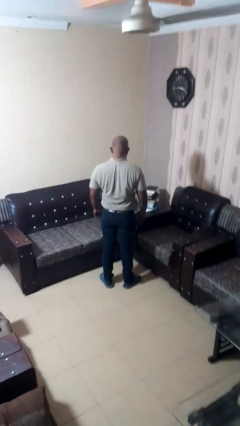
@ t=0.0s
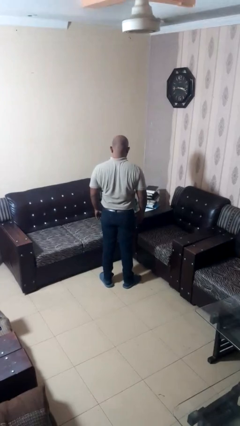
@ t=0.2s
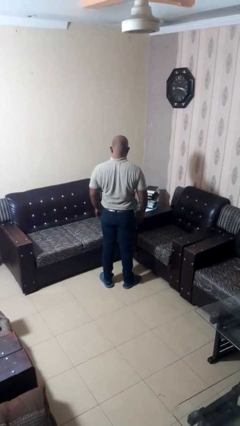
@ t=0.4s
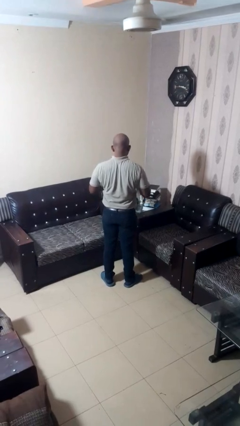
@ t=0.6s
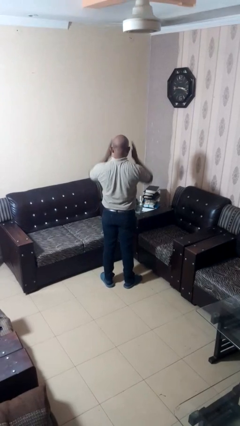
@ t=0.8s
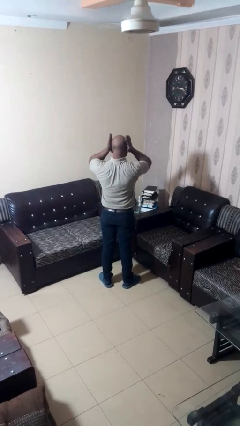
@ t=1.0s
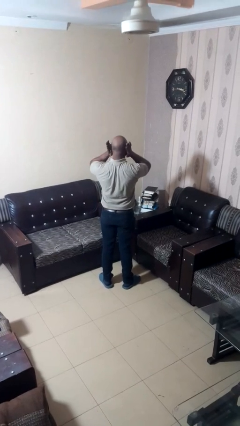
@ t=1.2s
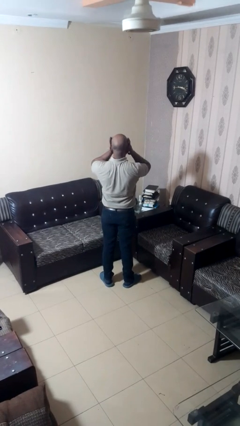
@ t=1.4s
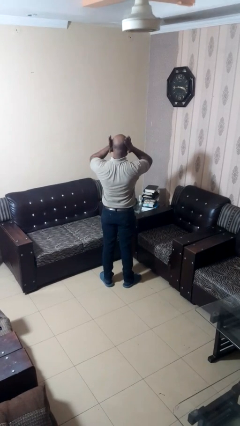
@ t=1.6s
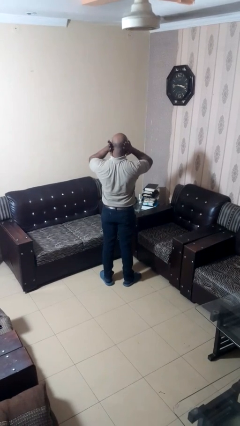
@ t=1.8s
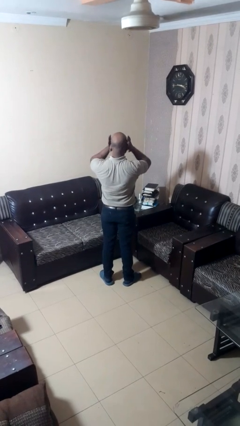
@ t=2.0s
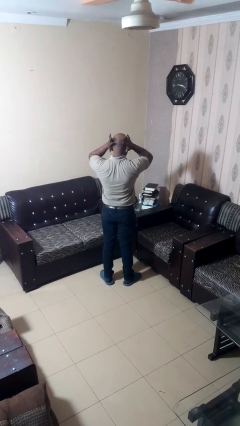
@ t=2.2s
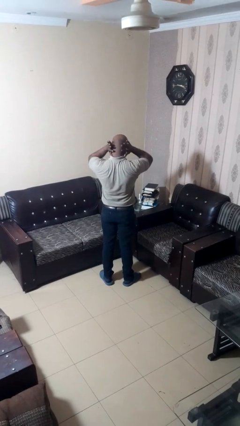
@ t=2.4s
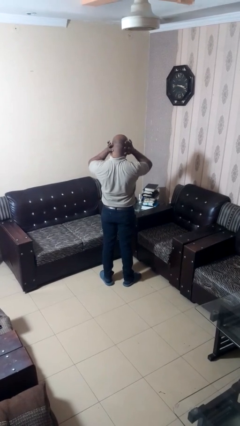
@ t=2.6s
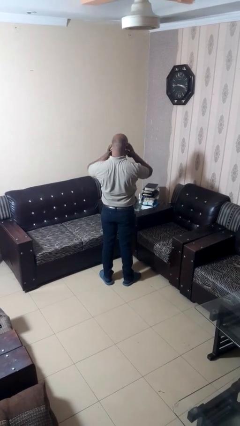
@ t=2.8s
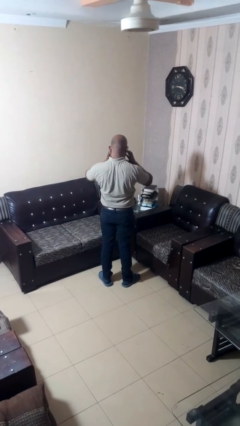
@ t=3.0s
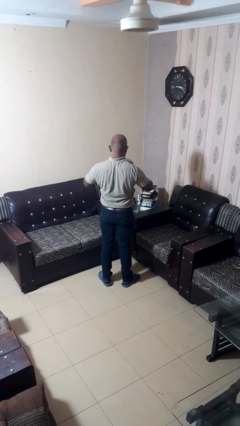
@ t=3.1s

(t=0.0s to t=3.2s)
person touches earlobe

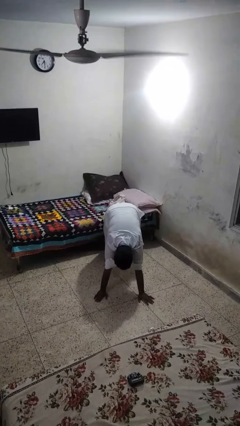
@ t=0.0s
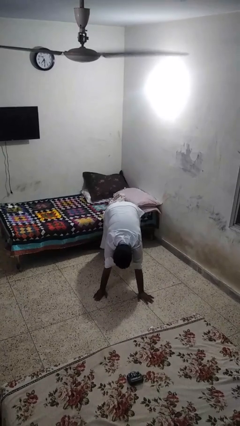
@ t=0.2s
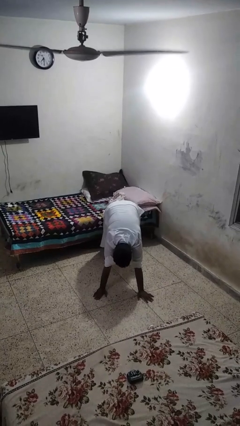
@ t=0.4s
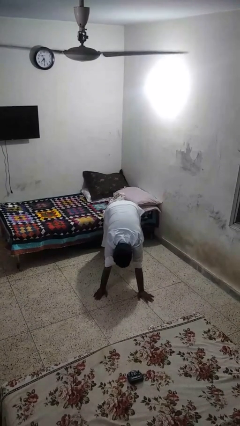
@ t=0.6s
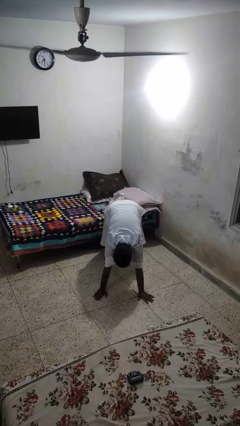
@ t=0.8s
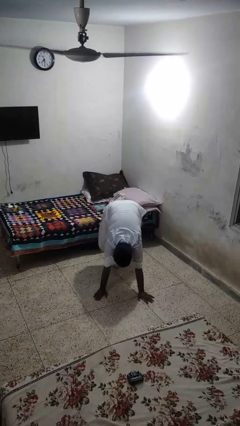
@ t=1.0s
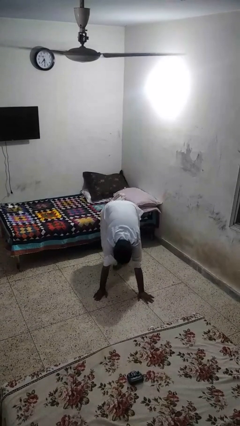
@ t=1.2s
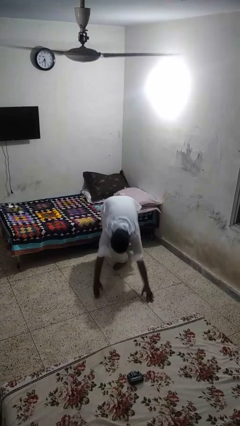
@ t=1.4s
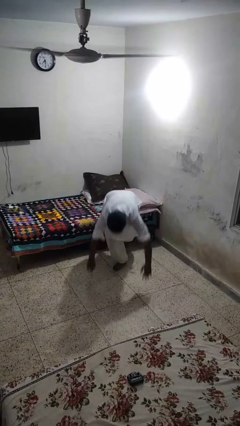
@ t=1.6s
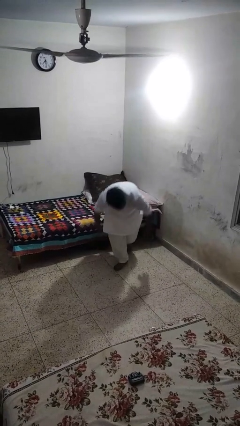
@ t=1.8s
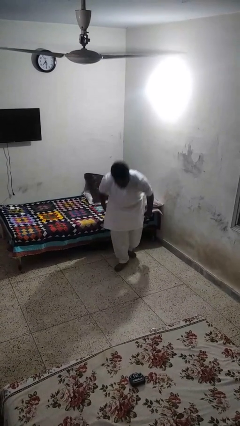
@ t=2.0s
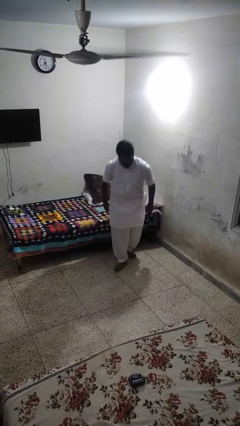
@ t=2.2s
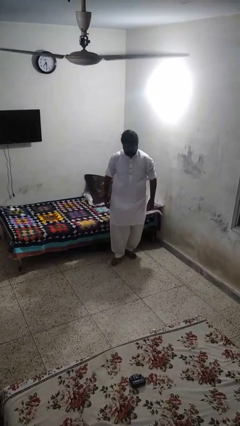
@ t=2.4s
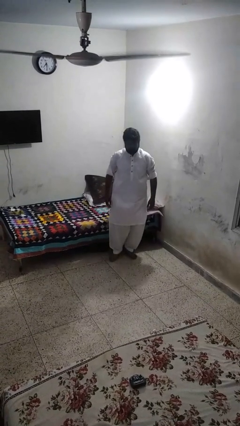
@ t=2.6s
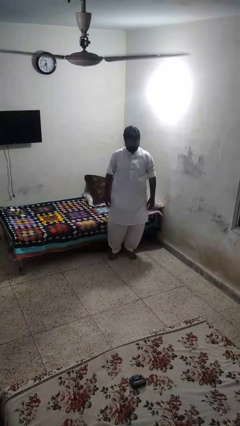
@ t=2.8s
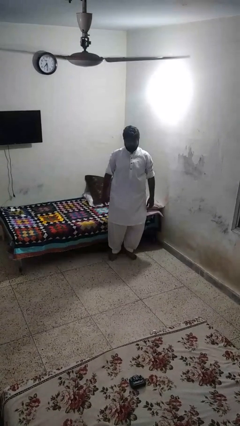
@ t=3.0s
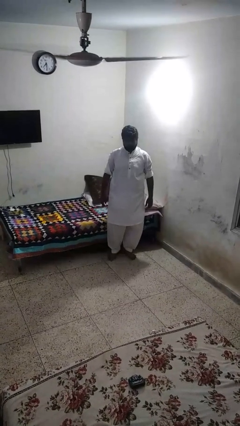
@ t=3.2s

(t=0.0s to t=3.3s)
person stands up from floor

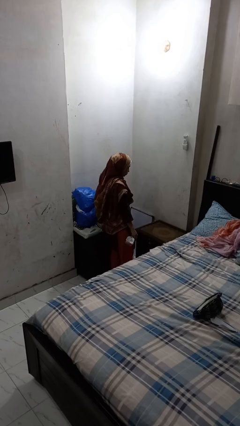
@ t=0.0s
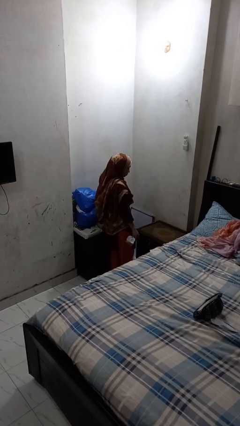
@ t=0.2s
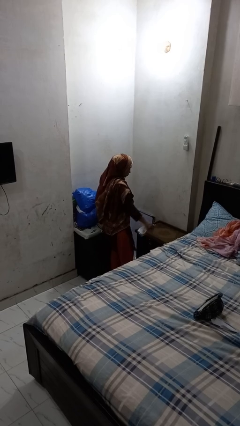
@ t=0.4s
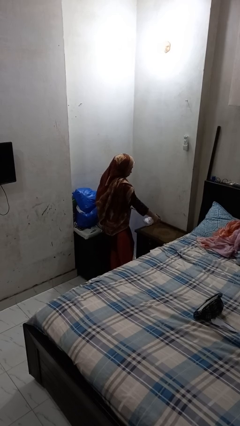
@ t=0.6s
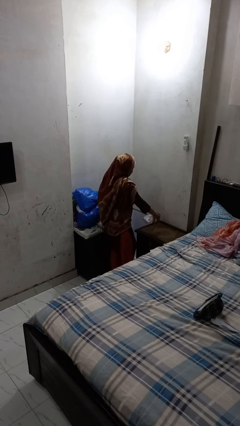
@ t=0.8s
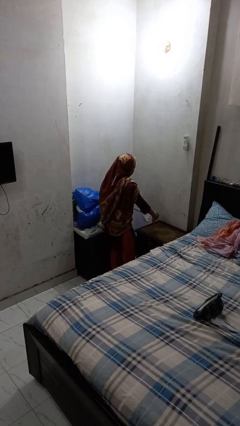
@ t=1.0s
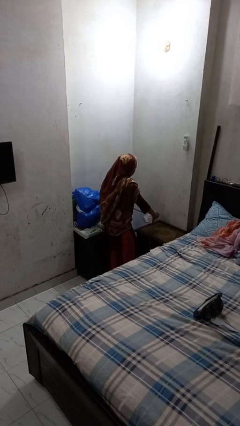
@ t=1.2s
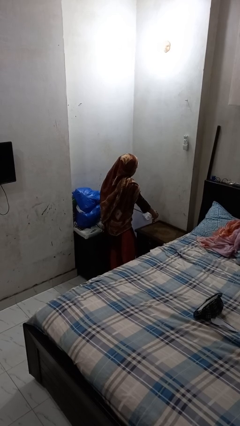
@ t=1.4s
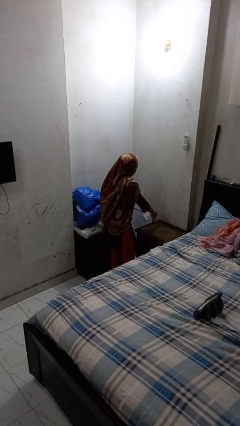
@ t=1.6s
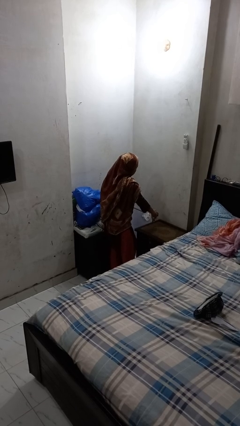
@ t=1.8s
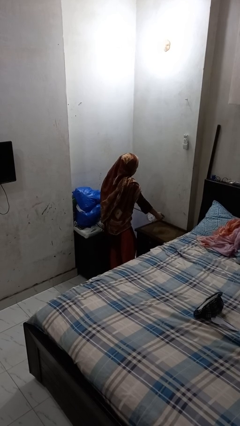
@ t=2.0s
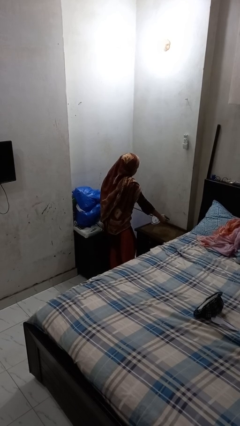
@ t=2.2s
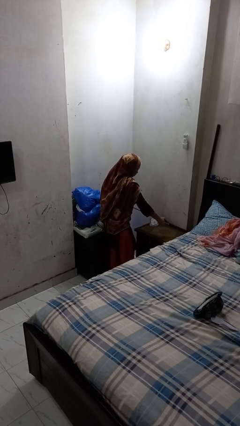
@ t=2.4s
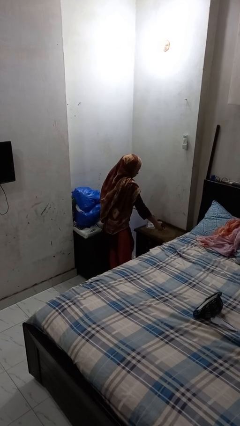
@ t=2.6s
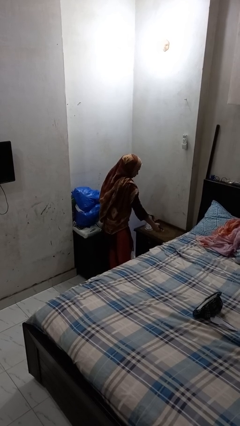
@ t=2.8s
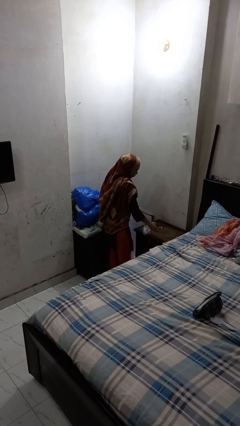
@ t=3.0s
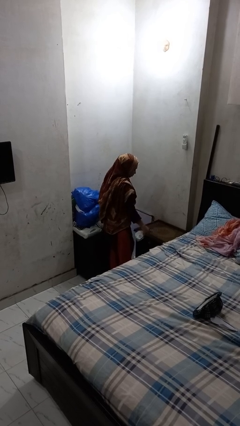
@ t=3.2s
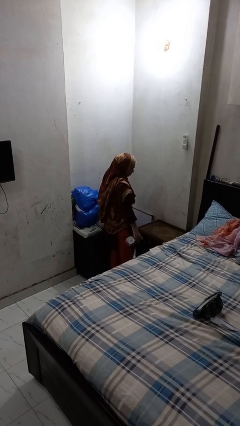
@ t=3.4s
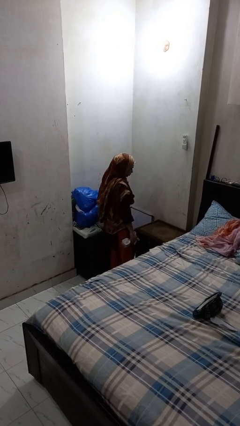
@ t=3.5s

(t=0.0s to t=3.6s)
person sprays from bottle

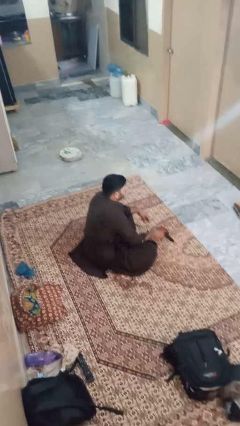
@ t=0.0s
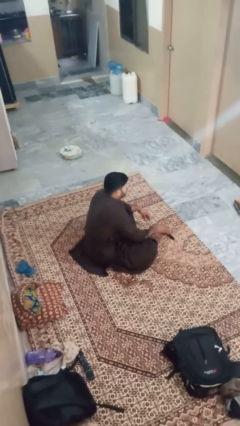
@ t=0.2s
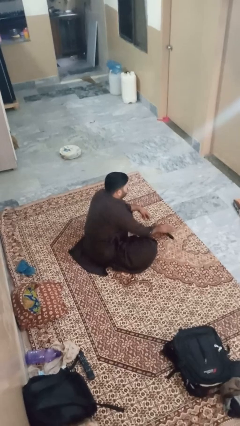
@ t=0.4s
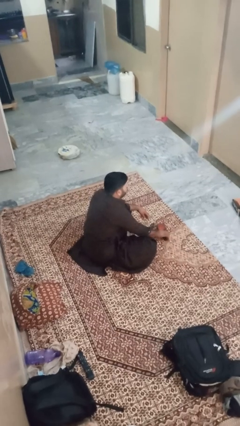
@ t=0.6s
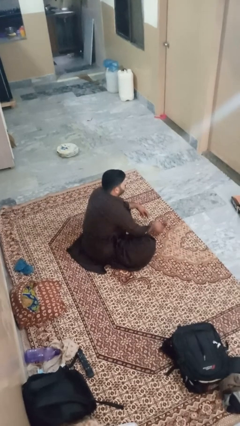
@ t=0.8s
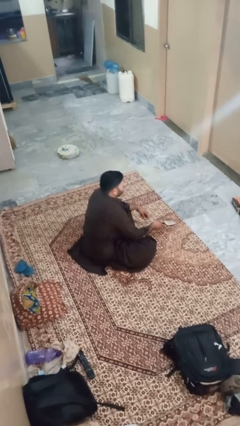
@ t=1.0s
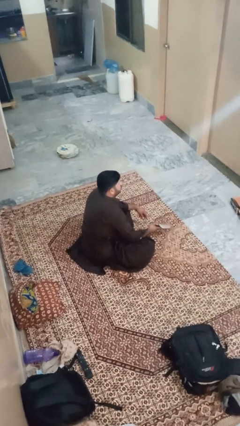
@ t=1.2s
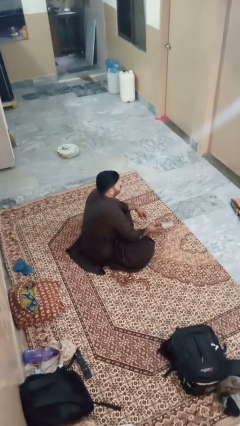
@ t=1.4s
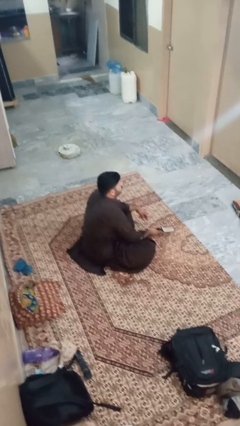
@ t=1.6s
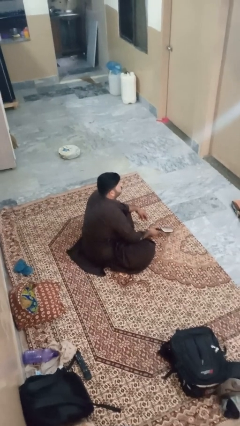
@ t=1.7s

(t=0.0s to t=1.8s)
person picks up object from floor

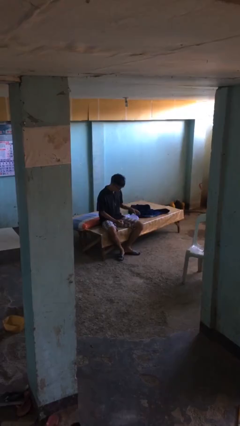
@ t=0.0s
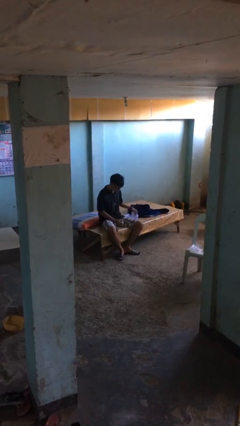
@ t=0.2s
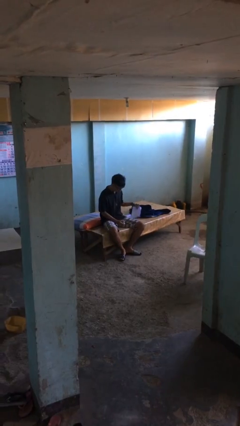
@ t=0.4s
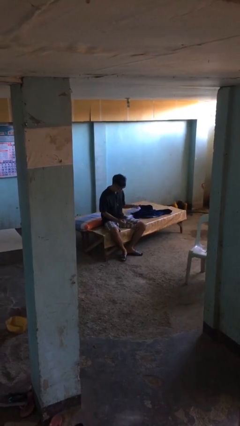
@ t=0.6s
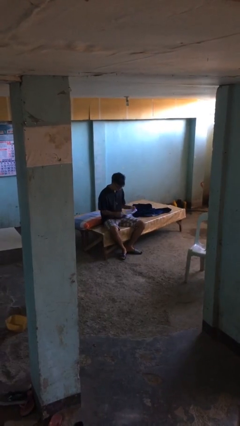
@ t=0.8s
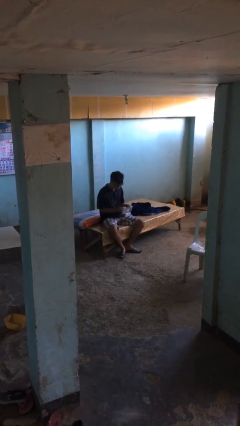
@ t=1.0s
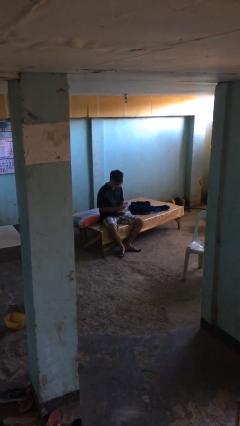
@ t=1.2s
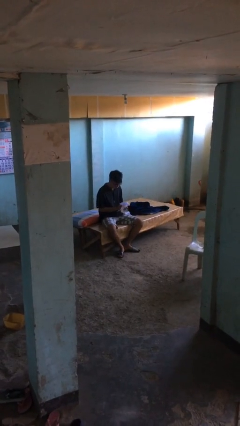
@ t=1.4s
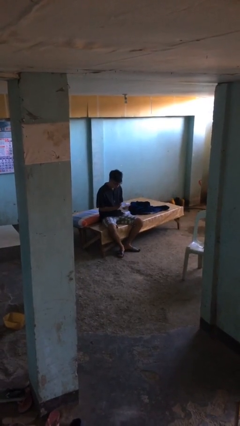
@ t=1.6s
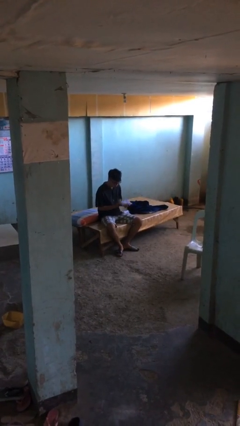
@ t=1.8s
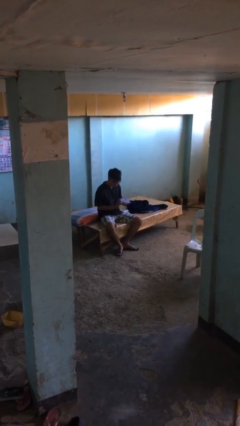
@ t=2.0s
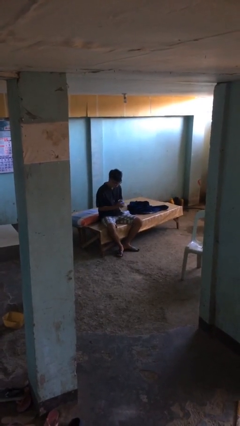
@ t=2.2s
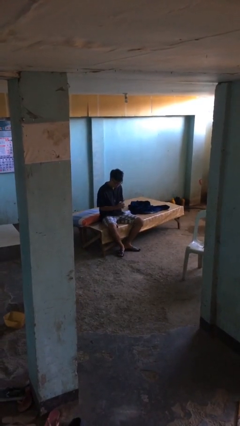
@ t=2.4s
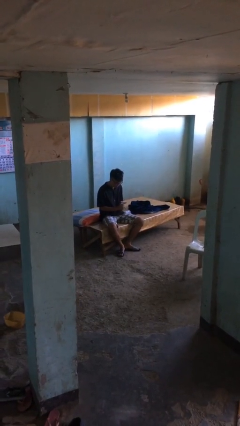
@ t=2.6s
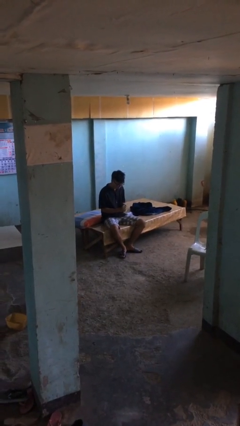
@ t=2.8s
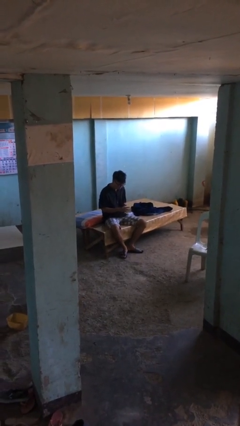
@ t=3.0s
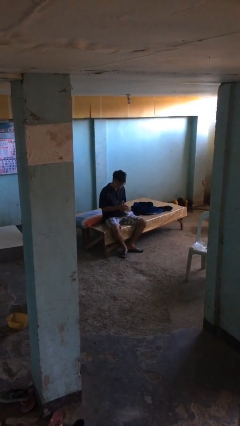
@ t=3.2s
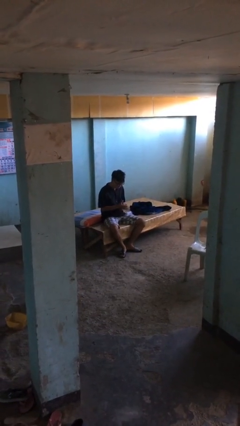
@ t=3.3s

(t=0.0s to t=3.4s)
person crumples paper

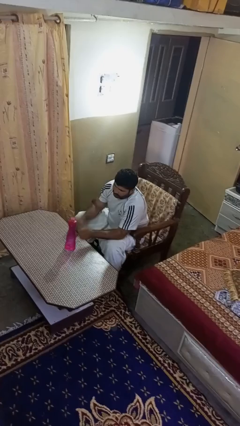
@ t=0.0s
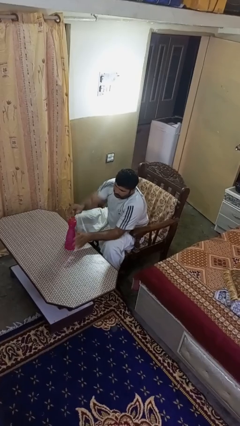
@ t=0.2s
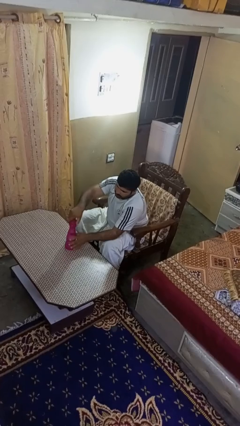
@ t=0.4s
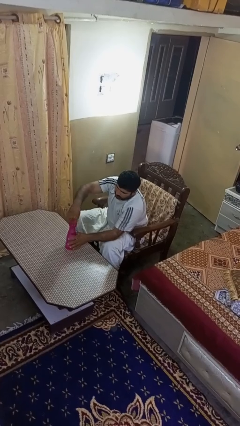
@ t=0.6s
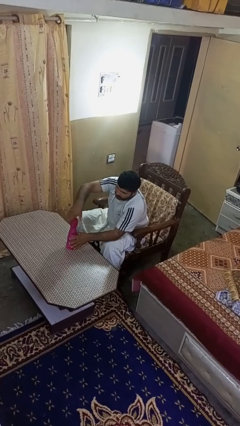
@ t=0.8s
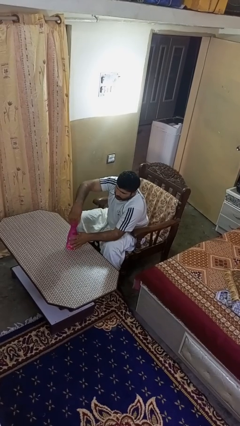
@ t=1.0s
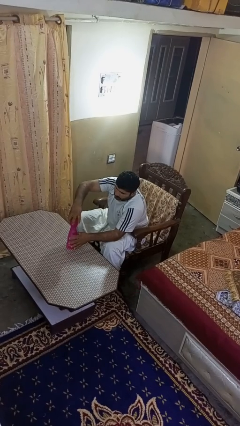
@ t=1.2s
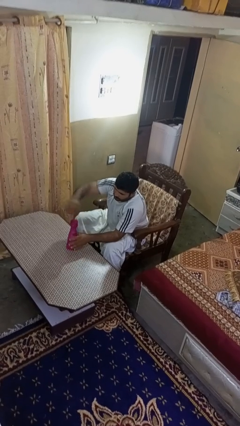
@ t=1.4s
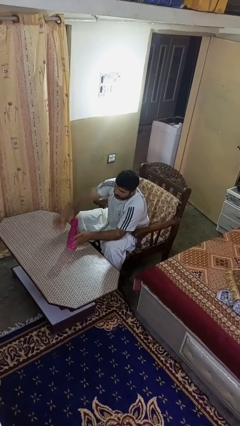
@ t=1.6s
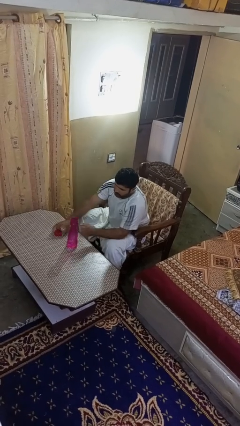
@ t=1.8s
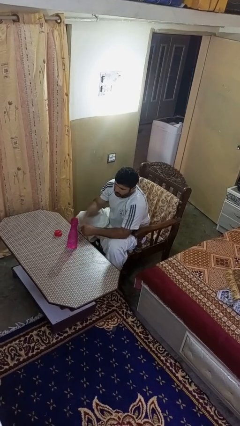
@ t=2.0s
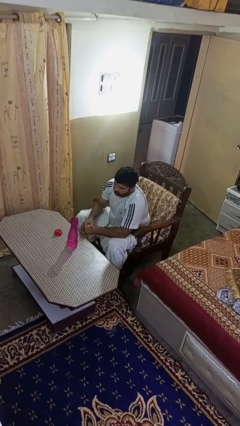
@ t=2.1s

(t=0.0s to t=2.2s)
person unscrews lid from bottle
